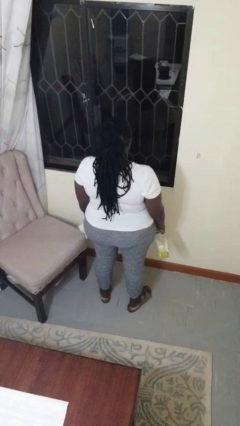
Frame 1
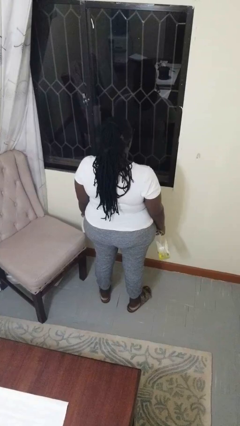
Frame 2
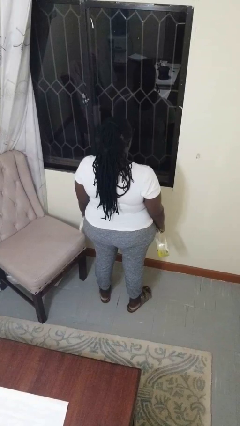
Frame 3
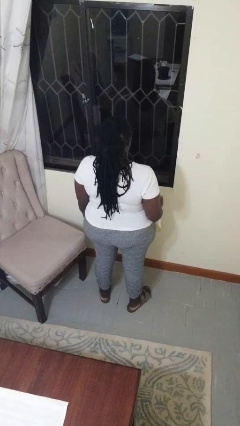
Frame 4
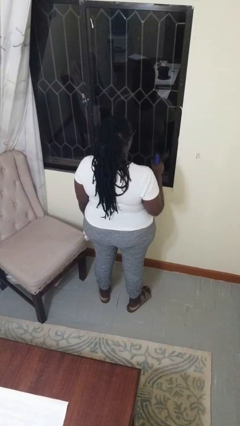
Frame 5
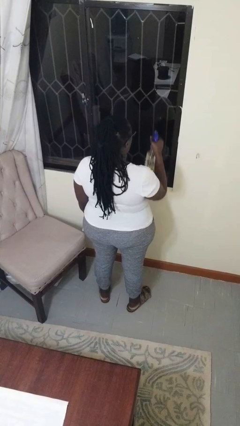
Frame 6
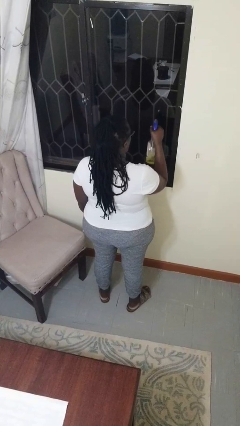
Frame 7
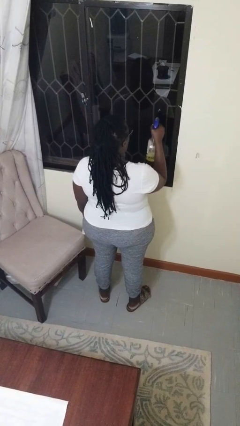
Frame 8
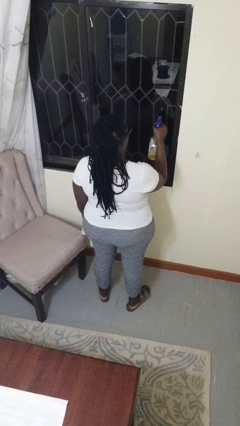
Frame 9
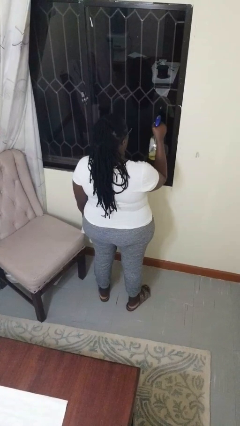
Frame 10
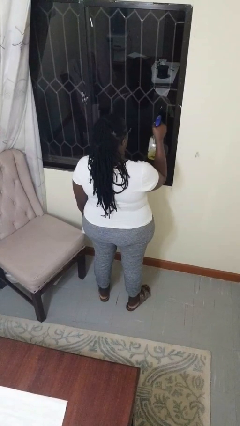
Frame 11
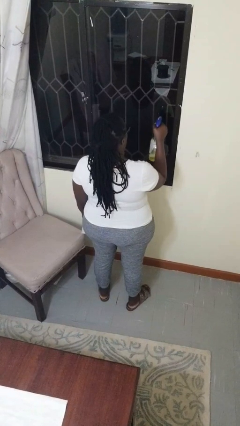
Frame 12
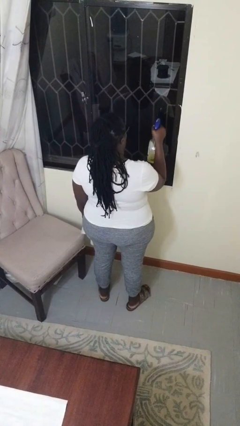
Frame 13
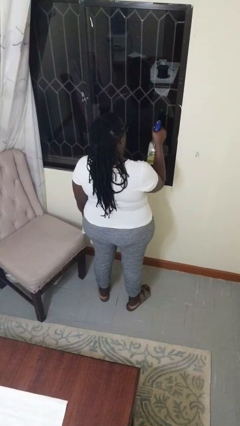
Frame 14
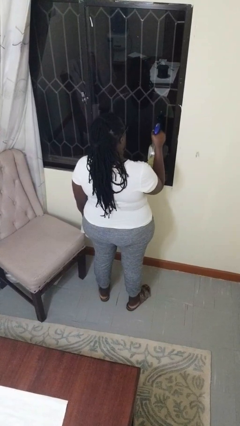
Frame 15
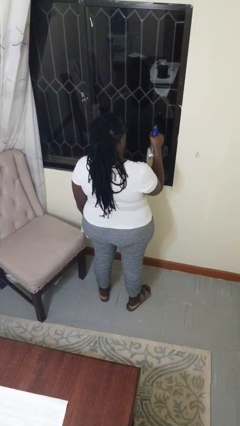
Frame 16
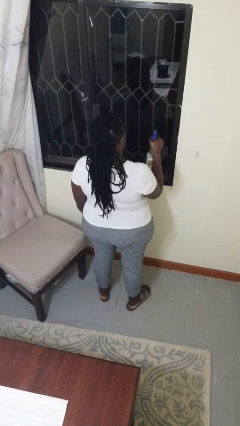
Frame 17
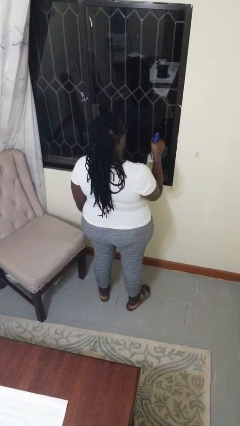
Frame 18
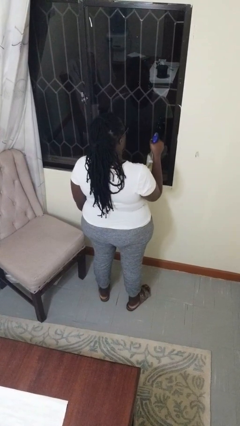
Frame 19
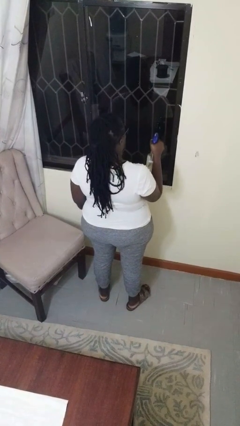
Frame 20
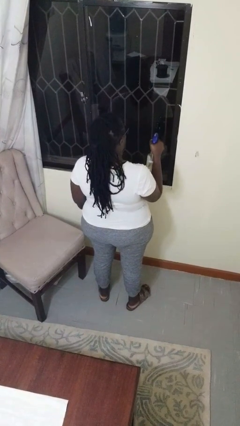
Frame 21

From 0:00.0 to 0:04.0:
person sprays from bottle

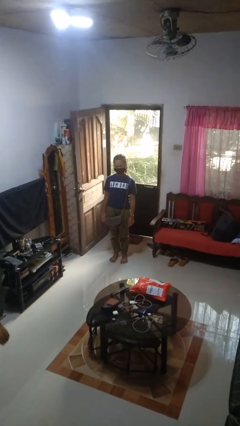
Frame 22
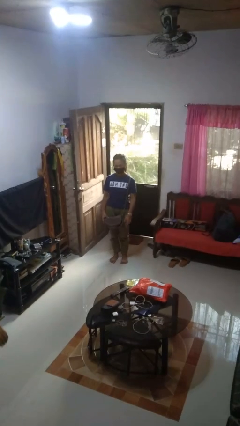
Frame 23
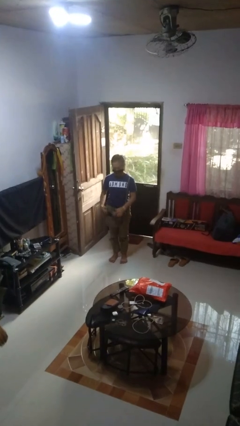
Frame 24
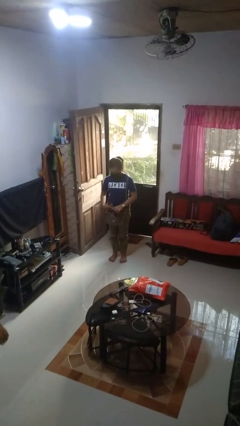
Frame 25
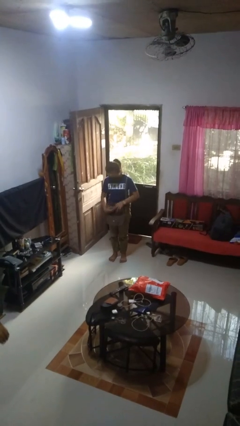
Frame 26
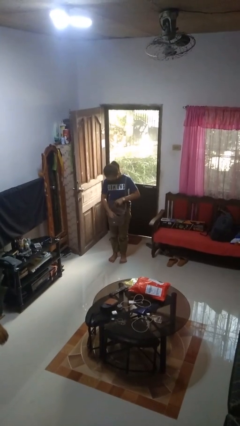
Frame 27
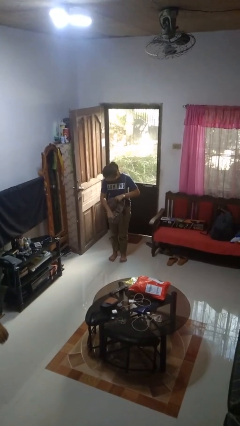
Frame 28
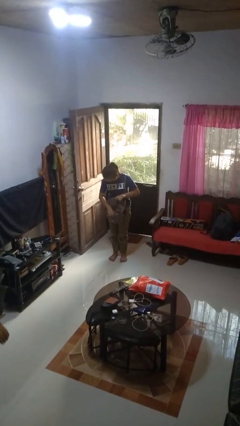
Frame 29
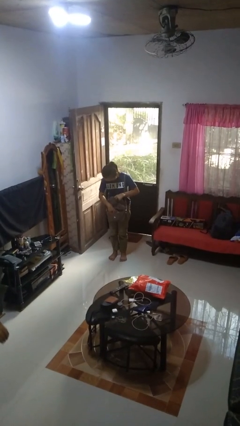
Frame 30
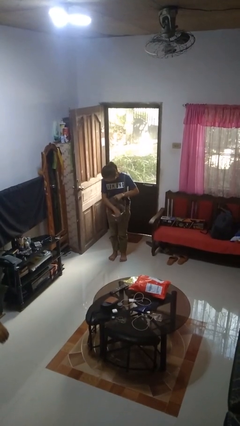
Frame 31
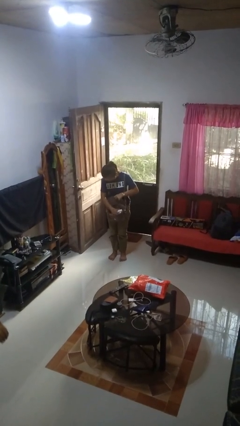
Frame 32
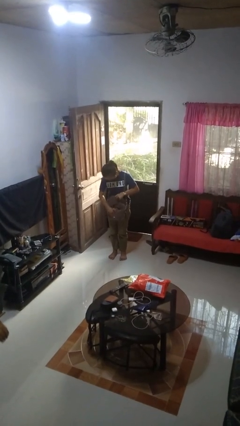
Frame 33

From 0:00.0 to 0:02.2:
person searches in purse

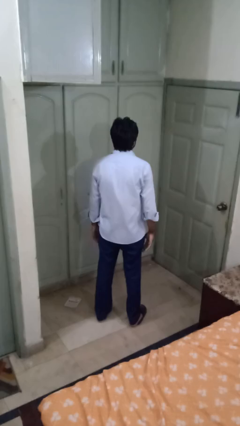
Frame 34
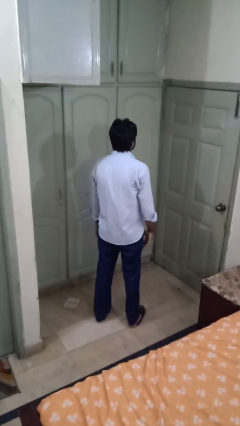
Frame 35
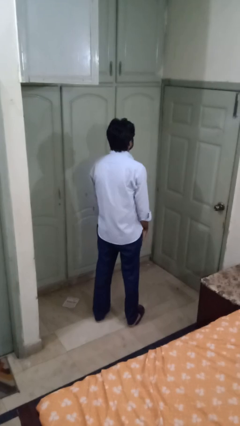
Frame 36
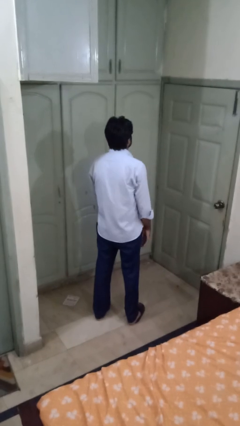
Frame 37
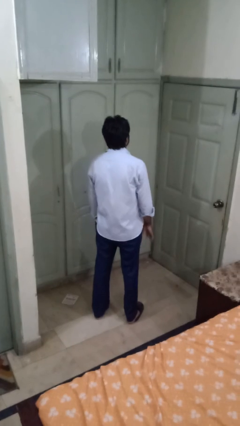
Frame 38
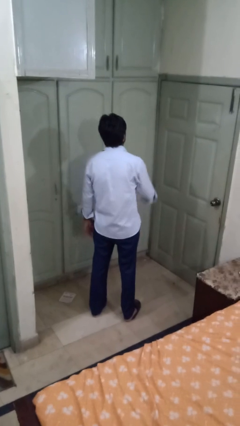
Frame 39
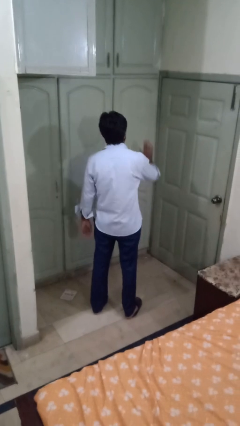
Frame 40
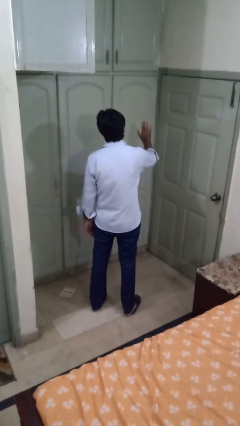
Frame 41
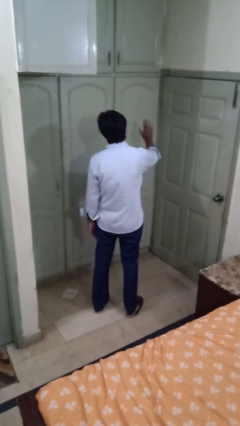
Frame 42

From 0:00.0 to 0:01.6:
person gestures stop

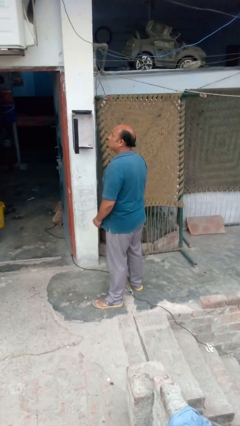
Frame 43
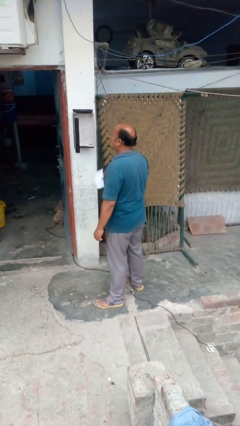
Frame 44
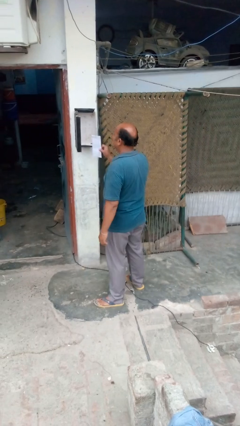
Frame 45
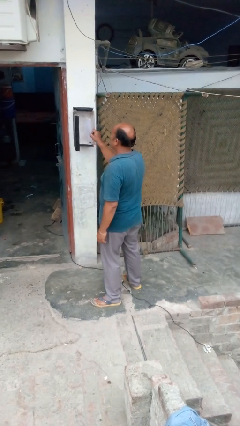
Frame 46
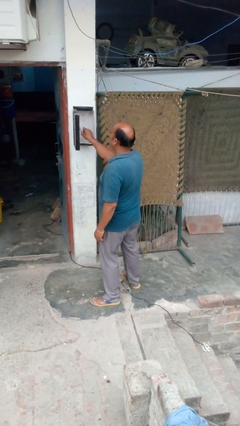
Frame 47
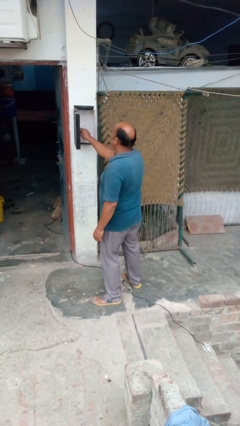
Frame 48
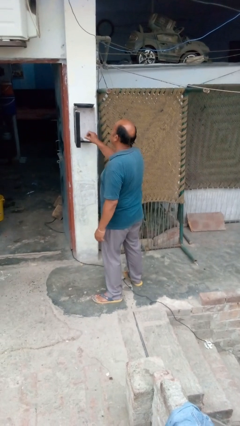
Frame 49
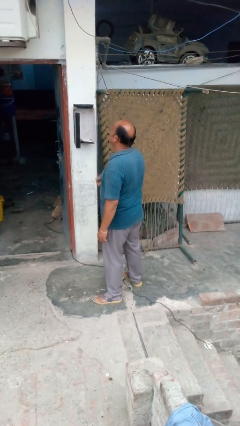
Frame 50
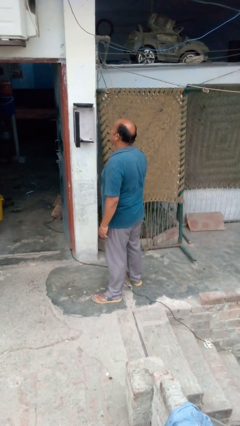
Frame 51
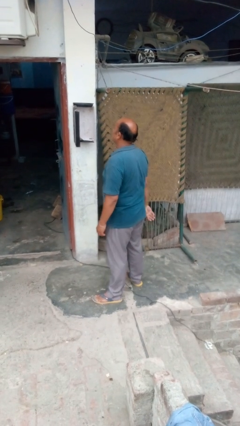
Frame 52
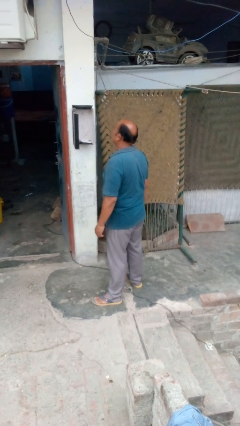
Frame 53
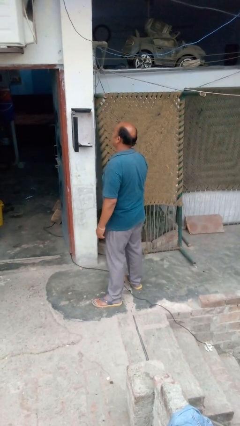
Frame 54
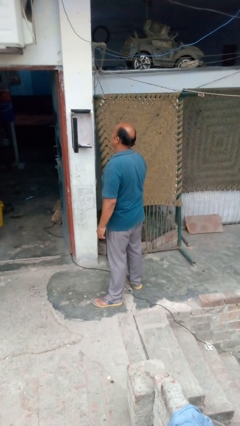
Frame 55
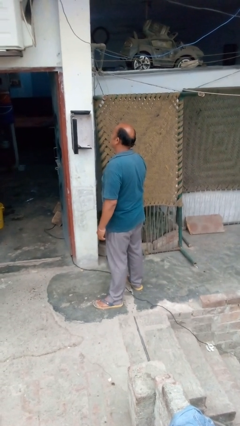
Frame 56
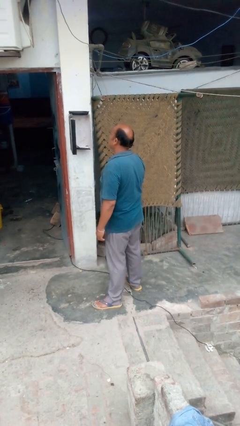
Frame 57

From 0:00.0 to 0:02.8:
person puts letters in mailbox

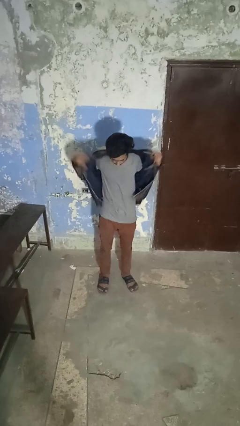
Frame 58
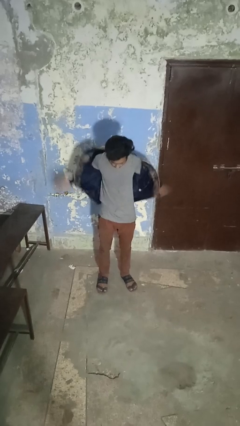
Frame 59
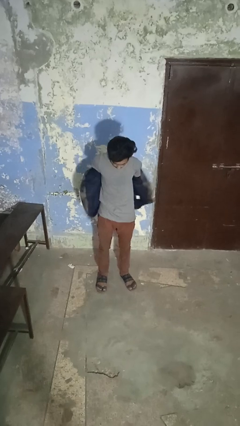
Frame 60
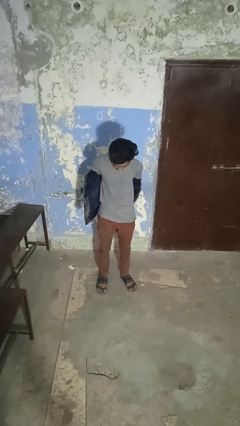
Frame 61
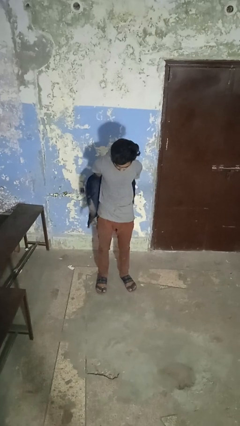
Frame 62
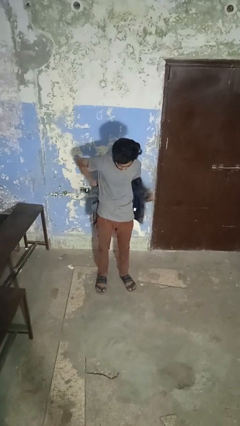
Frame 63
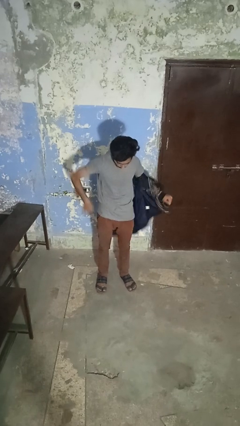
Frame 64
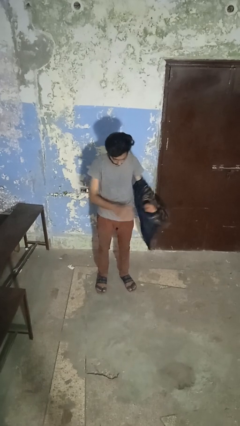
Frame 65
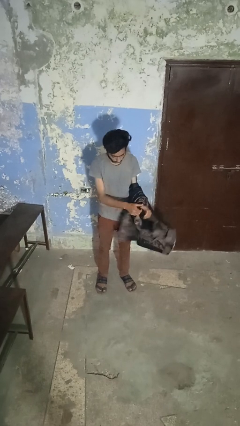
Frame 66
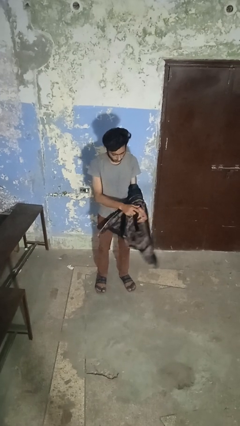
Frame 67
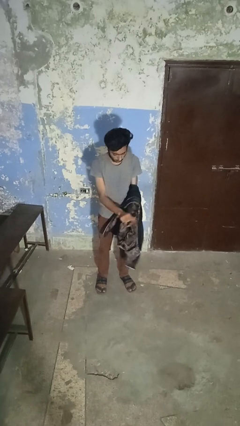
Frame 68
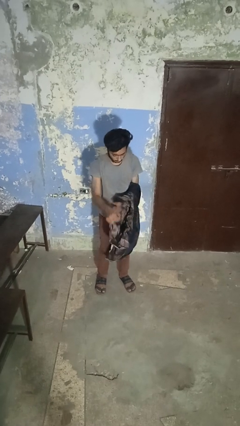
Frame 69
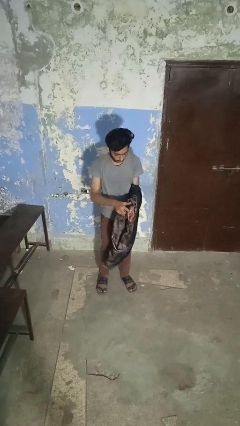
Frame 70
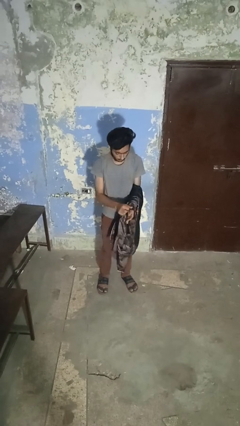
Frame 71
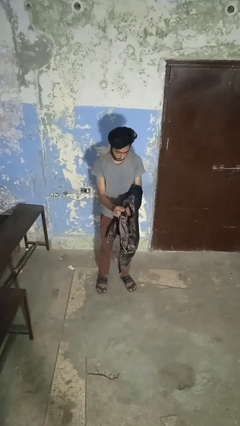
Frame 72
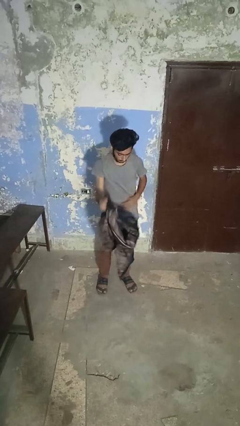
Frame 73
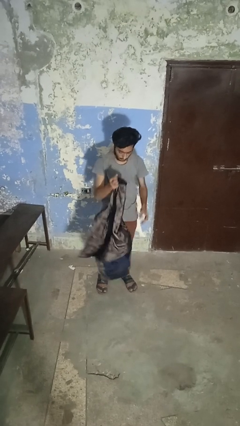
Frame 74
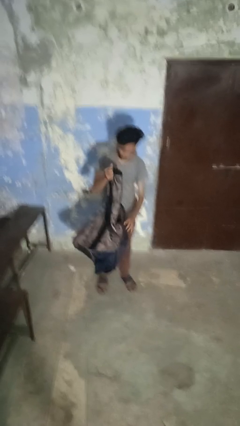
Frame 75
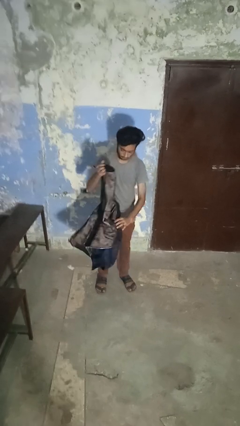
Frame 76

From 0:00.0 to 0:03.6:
person takes off jacket

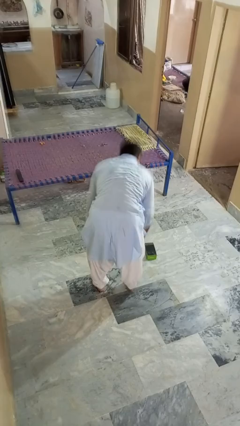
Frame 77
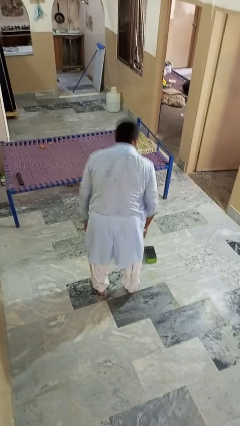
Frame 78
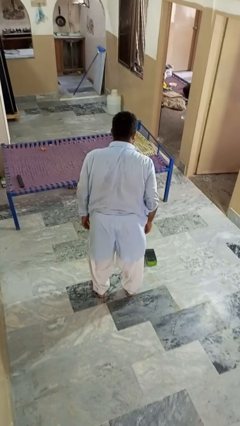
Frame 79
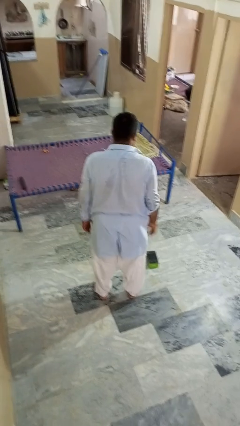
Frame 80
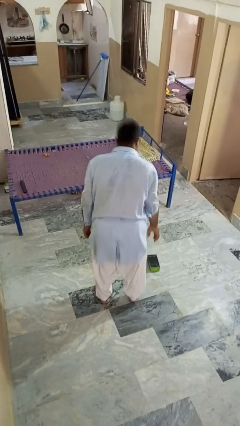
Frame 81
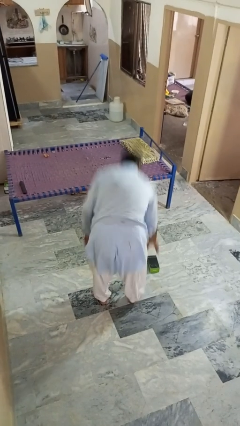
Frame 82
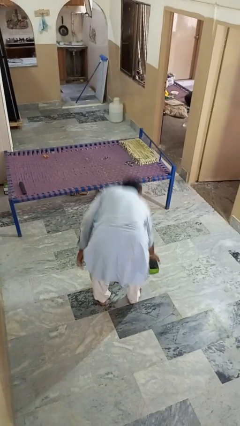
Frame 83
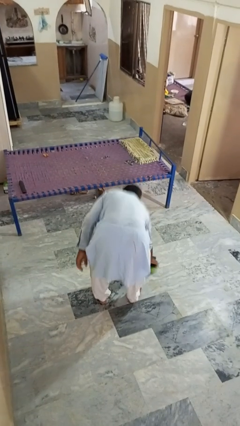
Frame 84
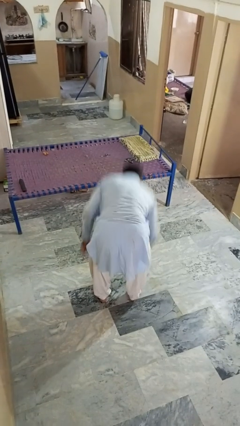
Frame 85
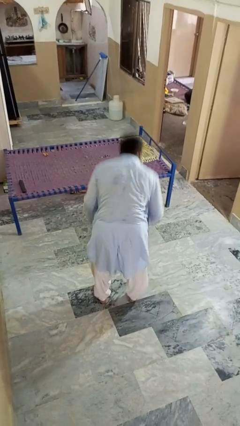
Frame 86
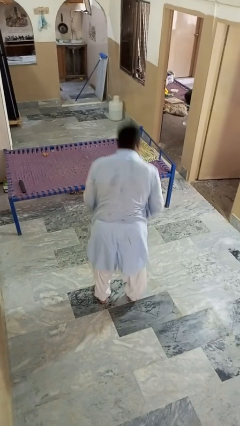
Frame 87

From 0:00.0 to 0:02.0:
person picks up object from floor

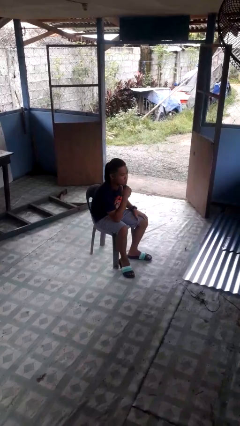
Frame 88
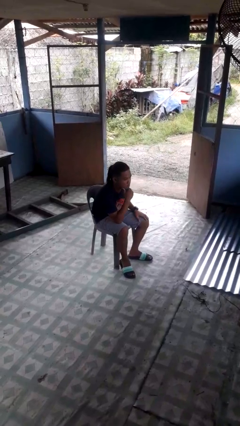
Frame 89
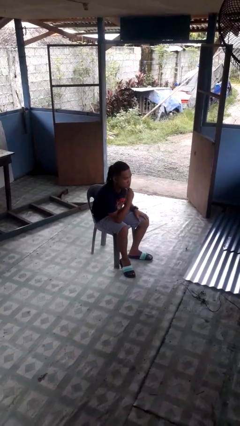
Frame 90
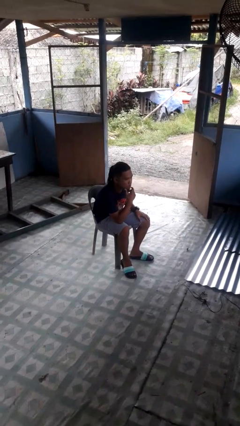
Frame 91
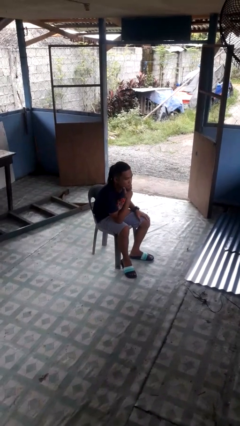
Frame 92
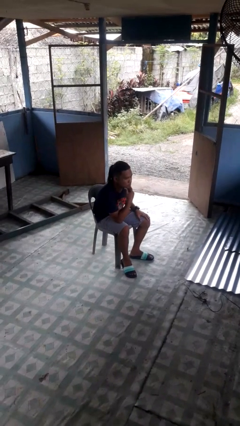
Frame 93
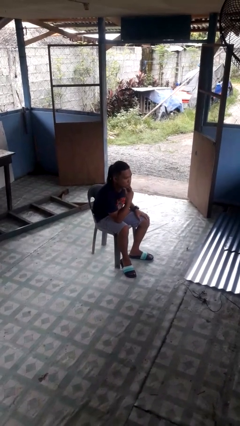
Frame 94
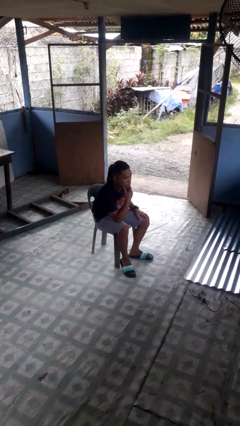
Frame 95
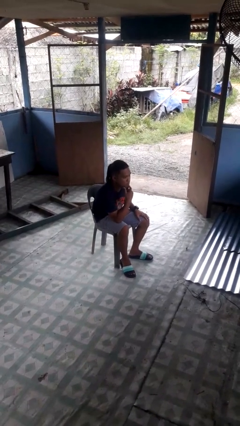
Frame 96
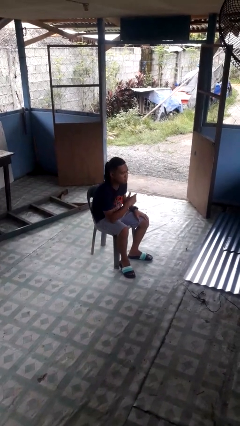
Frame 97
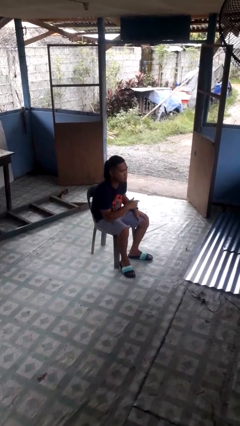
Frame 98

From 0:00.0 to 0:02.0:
person strokes chin
